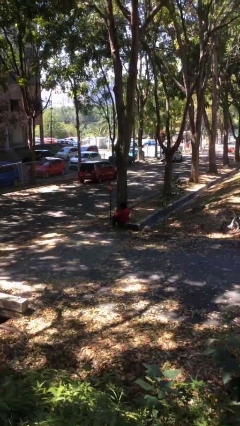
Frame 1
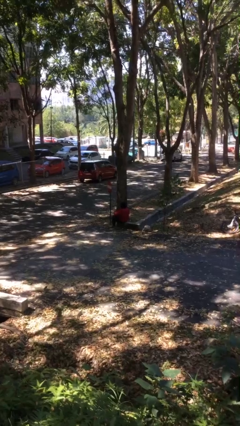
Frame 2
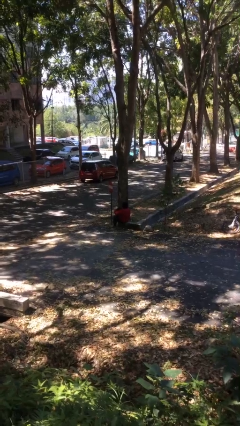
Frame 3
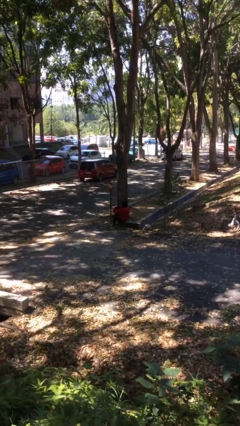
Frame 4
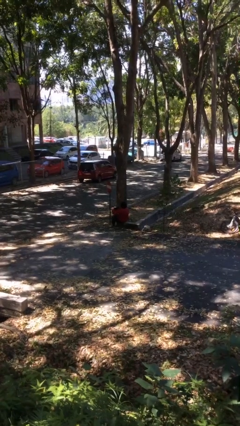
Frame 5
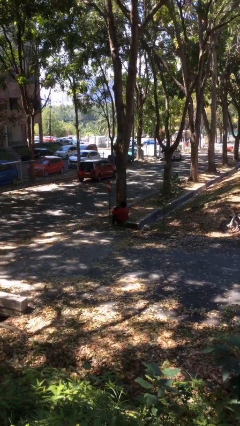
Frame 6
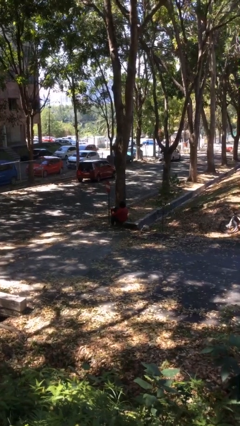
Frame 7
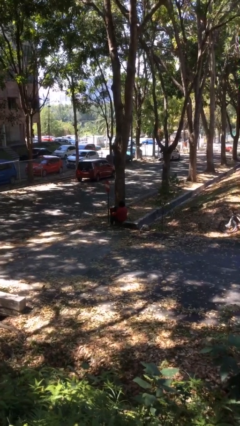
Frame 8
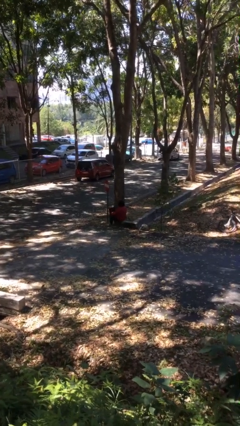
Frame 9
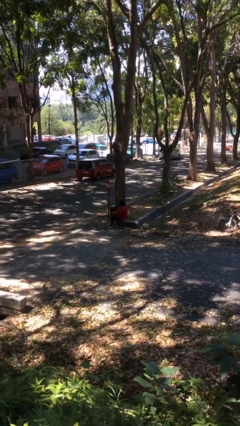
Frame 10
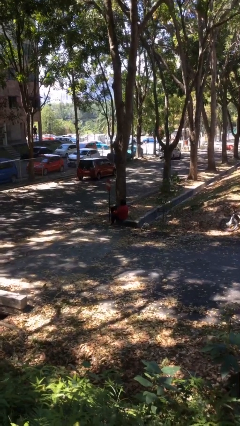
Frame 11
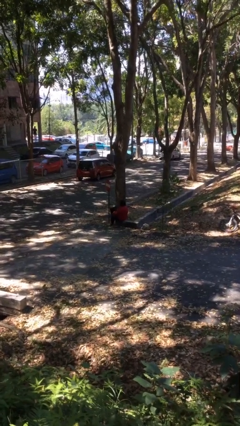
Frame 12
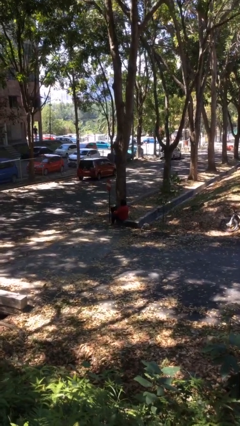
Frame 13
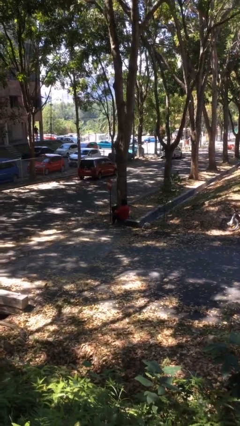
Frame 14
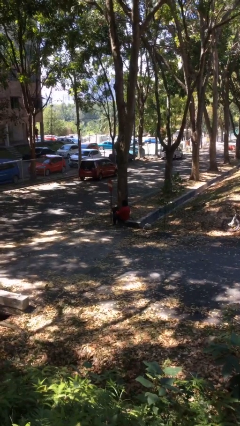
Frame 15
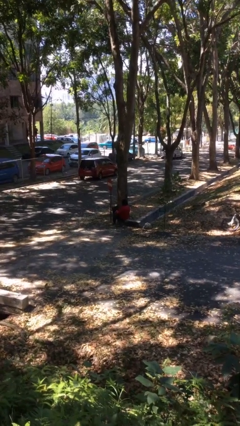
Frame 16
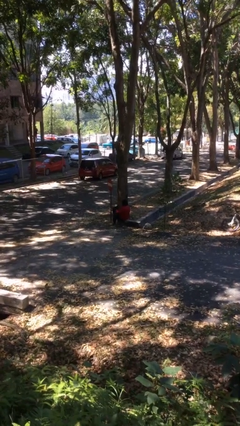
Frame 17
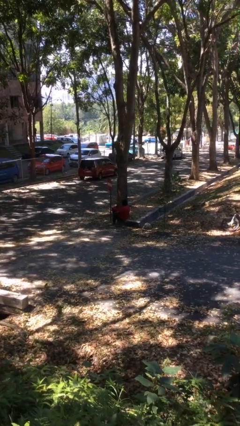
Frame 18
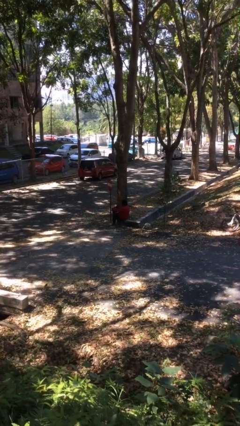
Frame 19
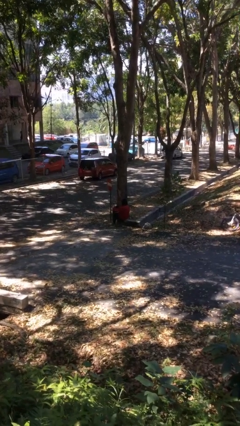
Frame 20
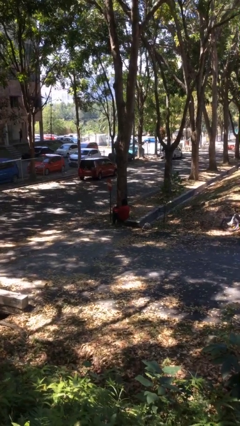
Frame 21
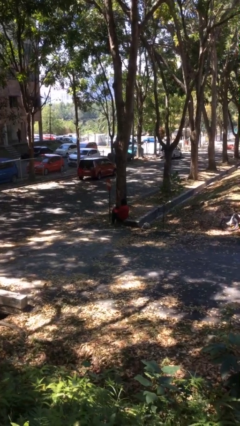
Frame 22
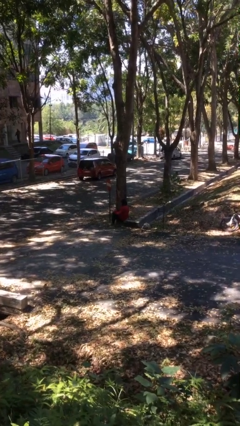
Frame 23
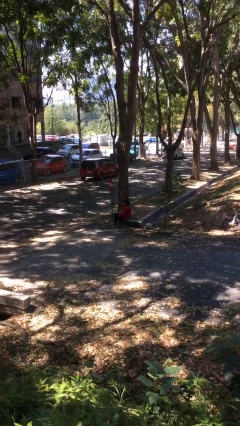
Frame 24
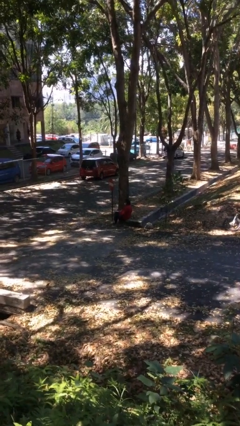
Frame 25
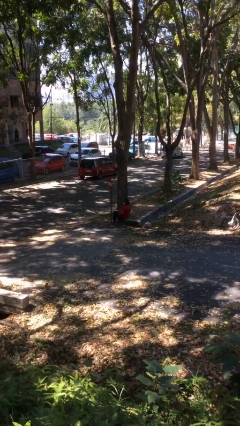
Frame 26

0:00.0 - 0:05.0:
person interacts with laptop

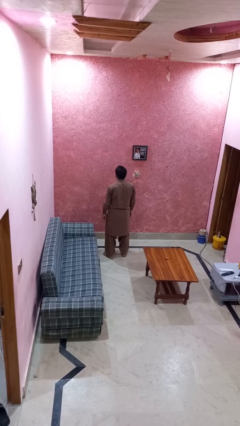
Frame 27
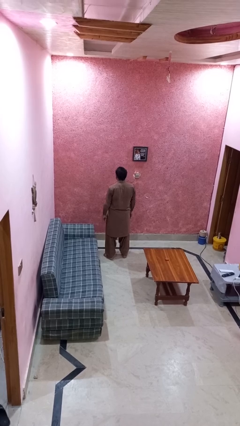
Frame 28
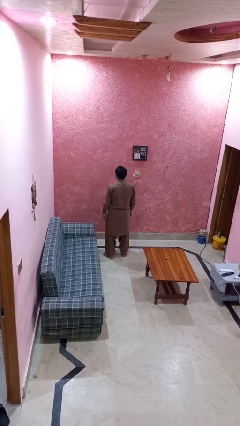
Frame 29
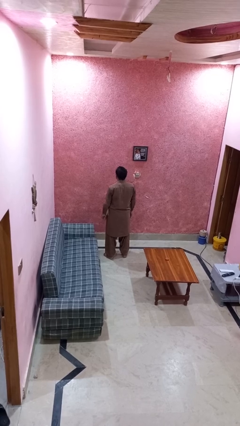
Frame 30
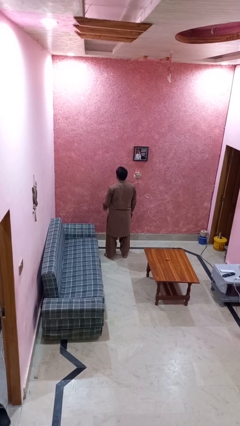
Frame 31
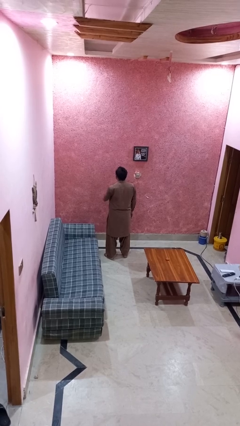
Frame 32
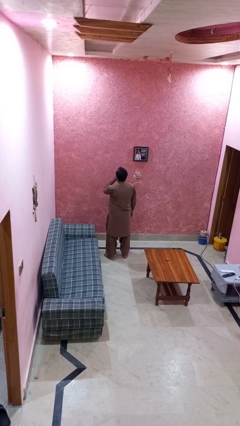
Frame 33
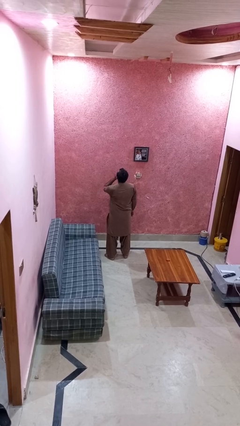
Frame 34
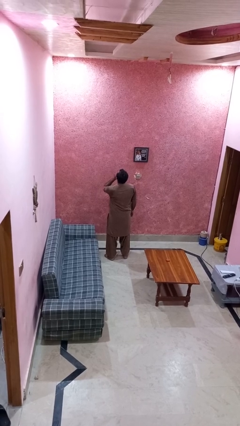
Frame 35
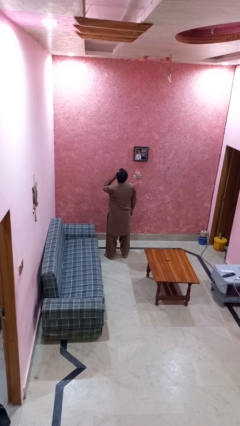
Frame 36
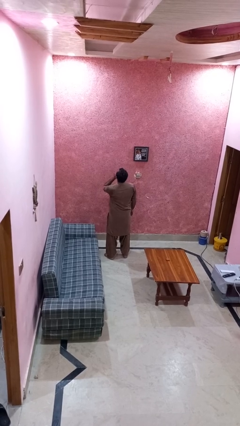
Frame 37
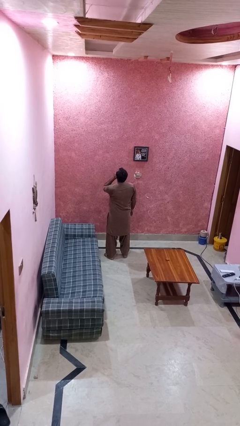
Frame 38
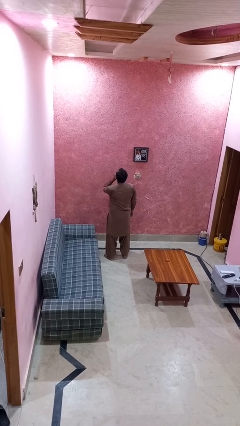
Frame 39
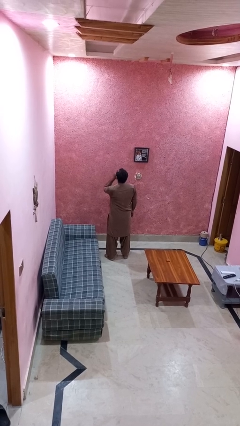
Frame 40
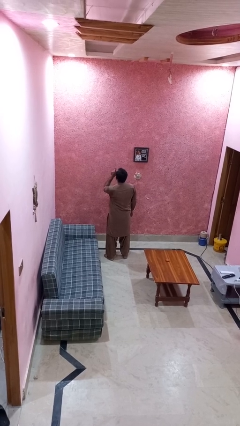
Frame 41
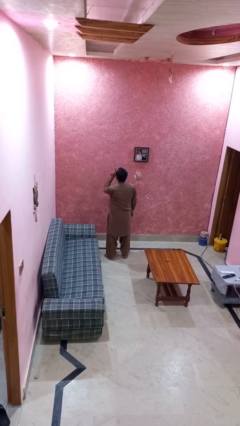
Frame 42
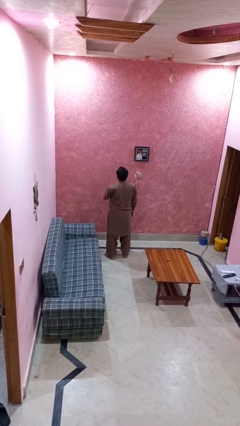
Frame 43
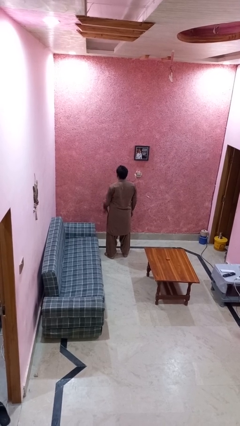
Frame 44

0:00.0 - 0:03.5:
person gestures be quiet

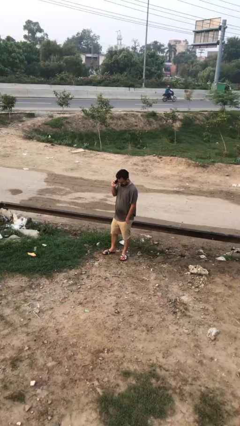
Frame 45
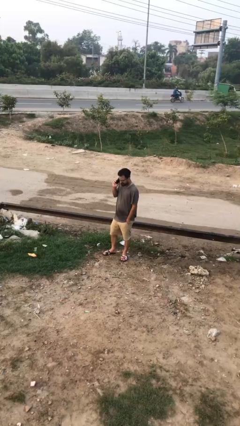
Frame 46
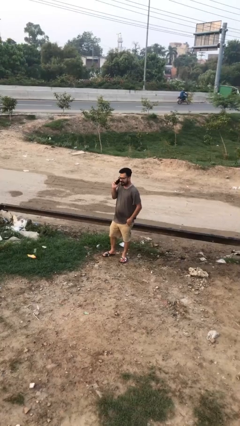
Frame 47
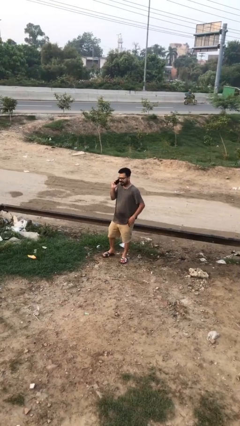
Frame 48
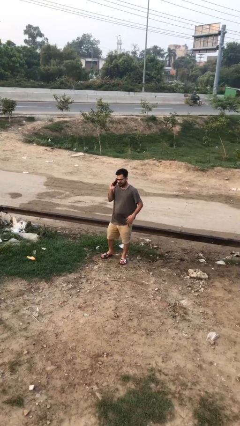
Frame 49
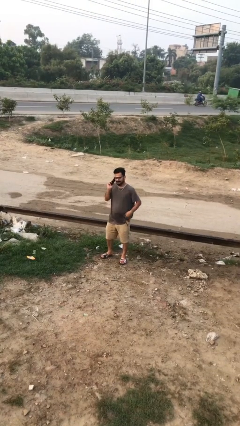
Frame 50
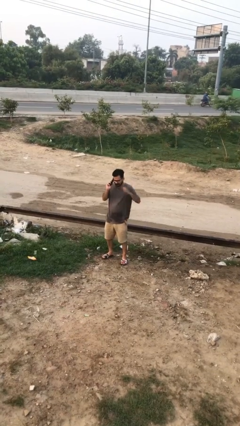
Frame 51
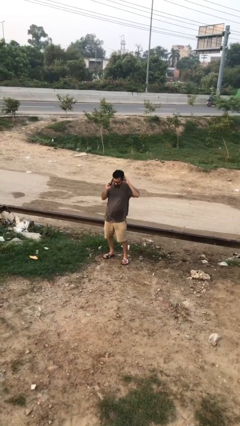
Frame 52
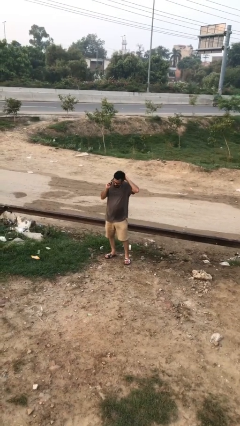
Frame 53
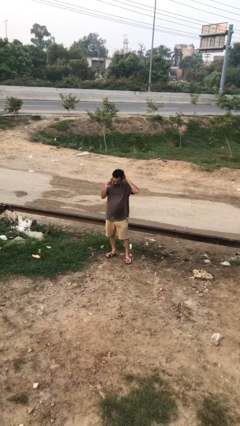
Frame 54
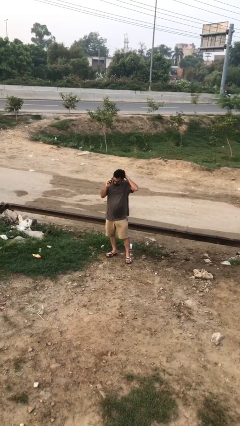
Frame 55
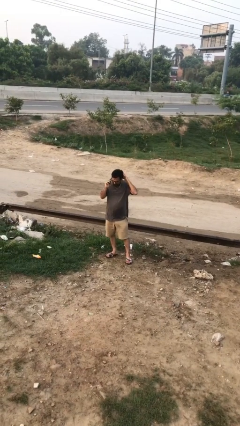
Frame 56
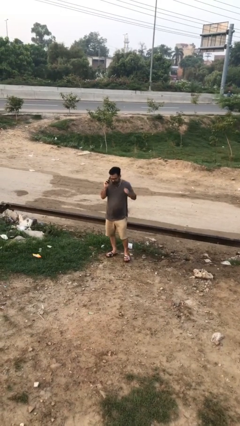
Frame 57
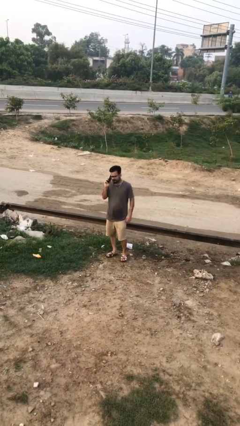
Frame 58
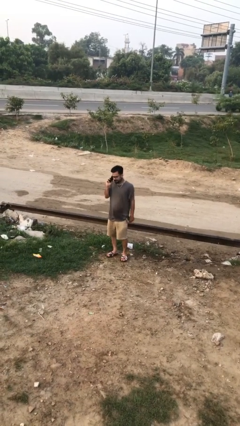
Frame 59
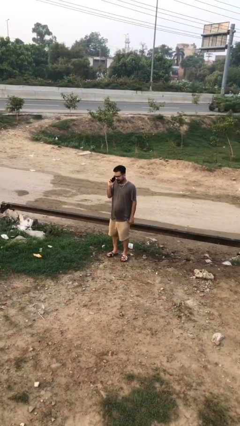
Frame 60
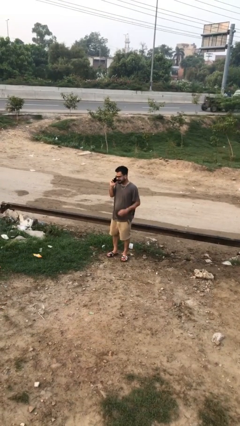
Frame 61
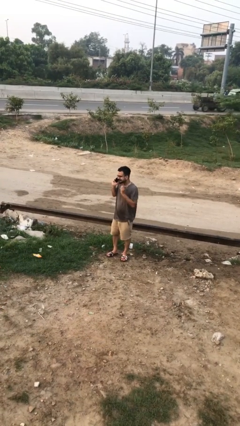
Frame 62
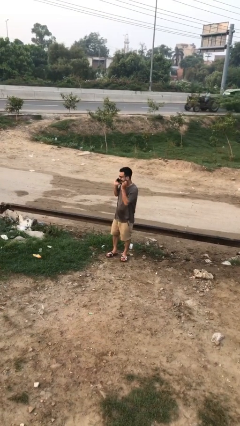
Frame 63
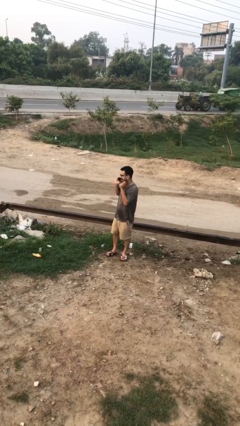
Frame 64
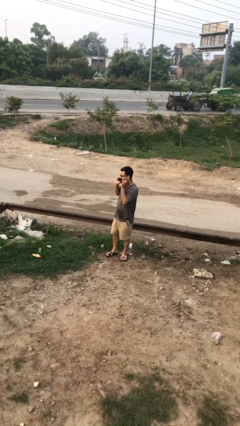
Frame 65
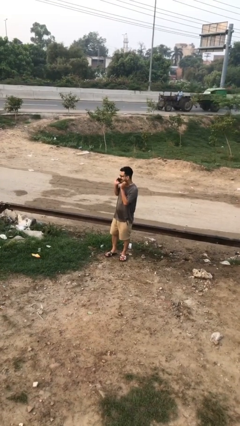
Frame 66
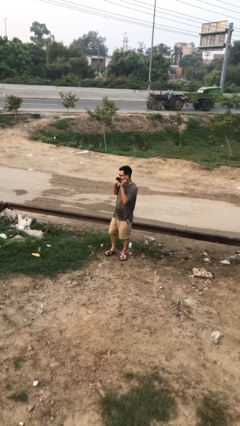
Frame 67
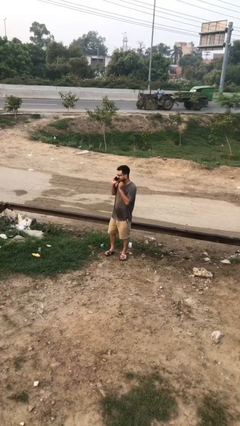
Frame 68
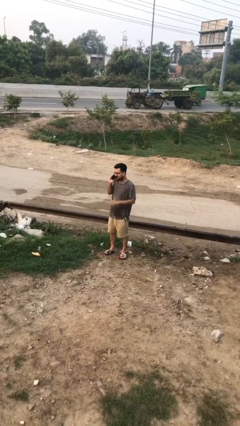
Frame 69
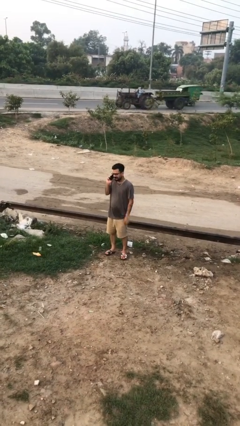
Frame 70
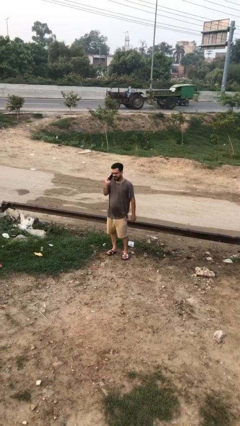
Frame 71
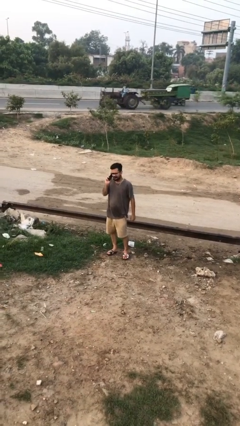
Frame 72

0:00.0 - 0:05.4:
person talks on phone

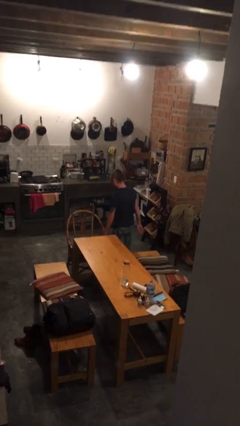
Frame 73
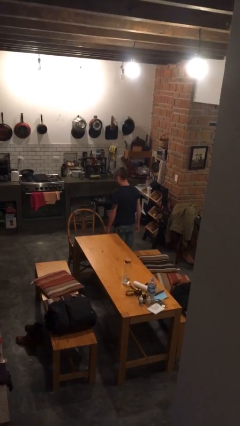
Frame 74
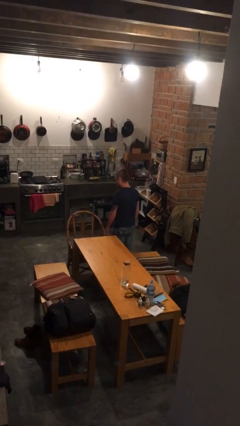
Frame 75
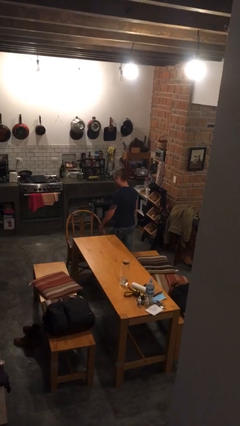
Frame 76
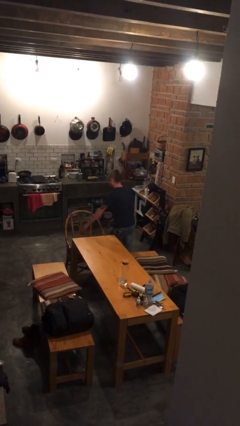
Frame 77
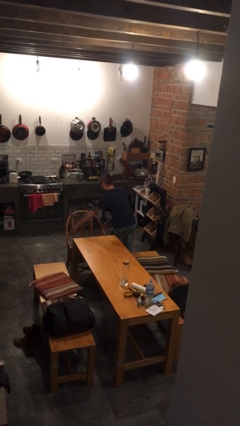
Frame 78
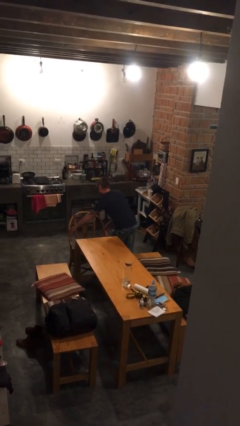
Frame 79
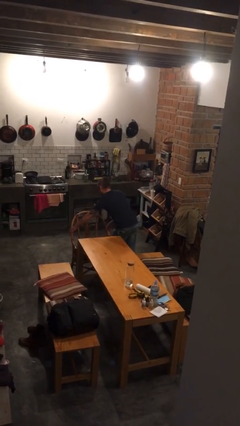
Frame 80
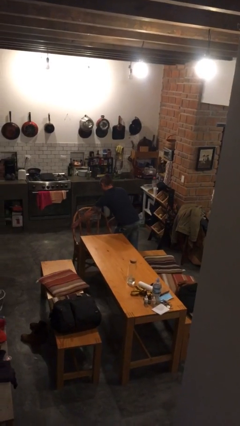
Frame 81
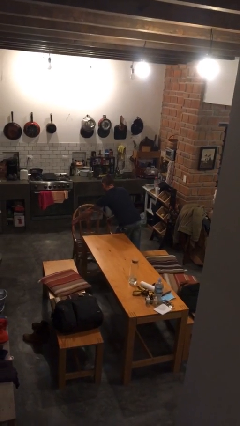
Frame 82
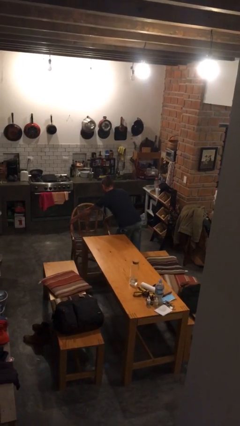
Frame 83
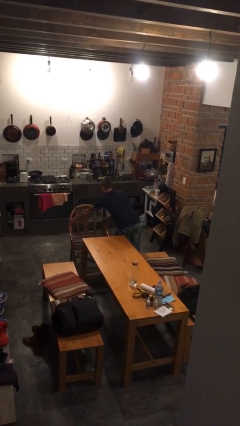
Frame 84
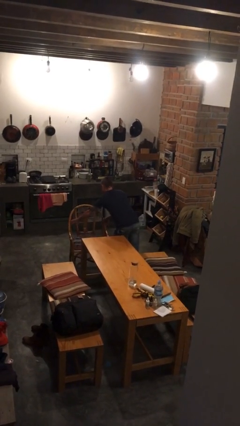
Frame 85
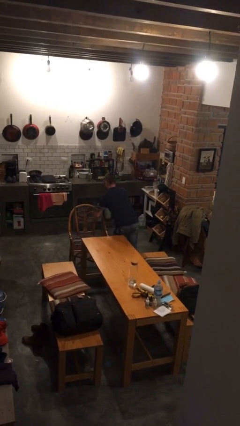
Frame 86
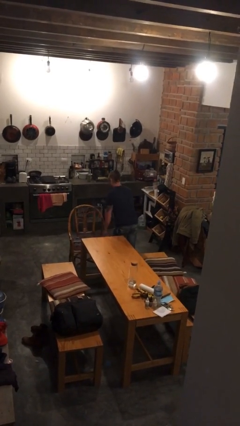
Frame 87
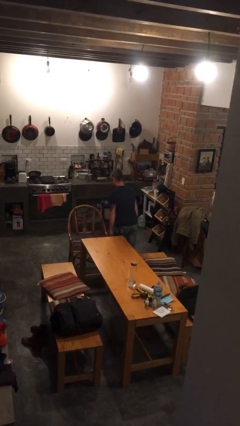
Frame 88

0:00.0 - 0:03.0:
person pulls out chair

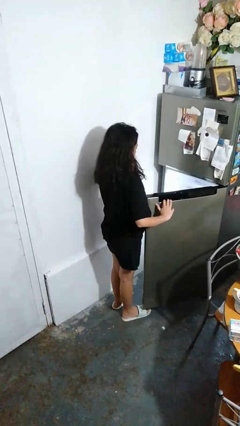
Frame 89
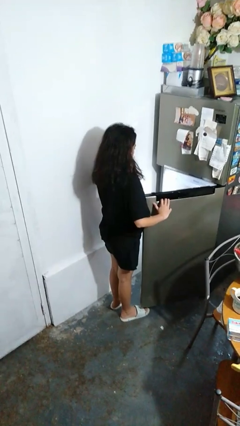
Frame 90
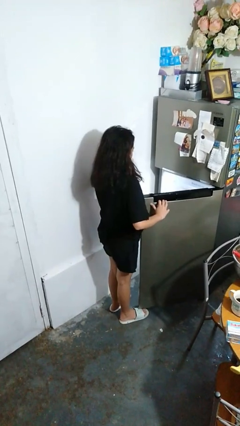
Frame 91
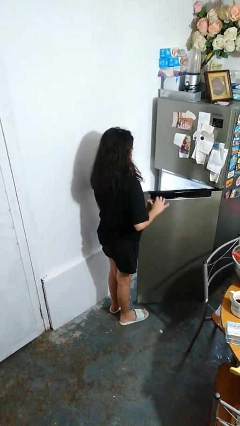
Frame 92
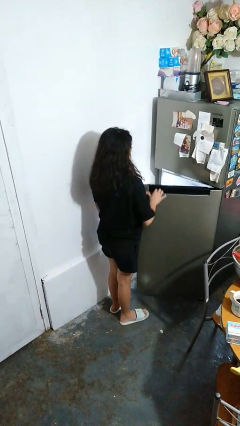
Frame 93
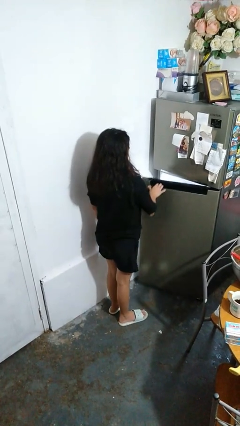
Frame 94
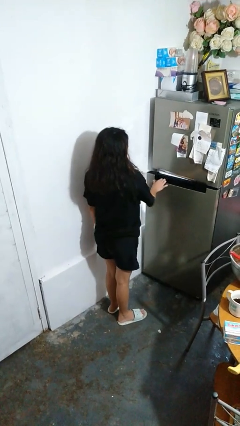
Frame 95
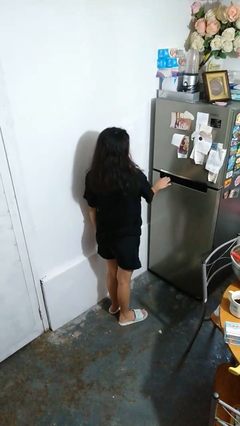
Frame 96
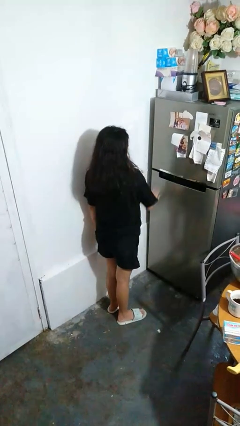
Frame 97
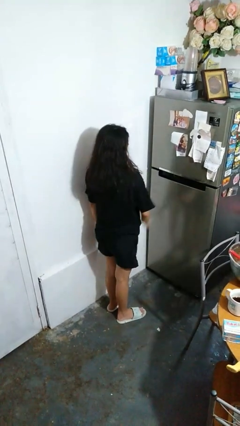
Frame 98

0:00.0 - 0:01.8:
person closes refrigerator
